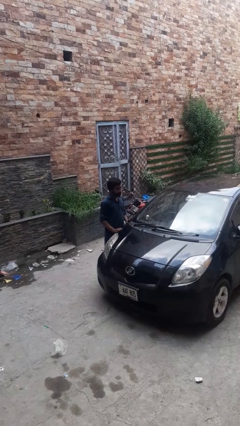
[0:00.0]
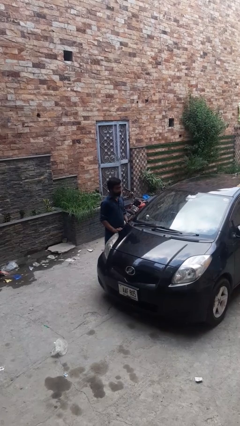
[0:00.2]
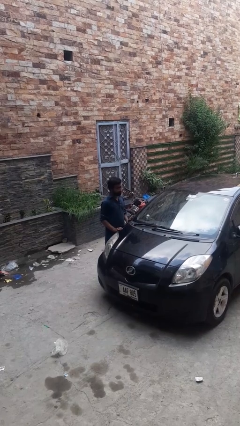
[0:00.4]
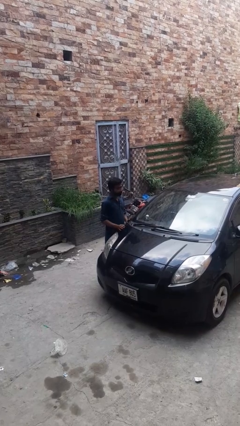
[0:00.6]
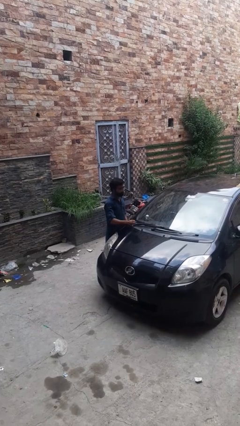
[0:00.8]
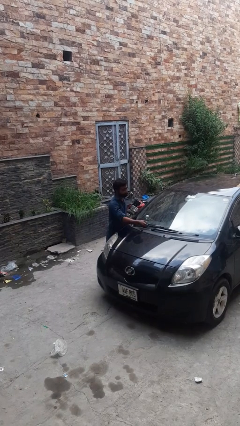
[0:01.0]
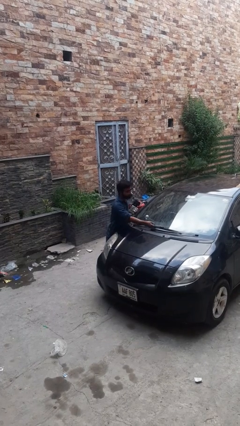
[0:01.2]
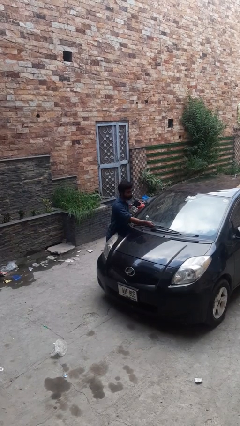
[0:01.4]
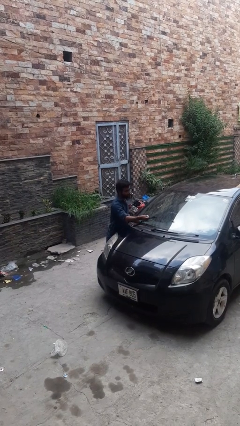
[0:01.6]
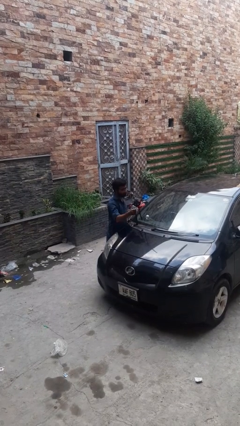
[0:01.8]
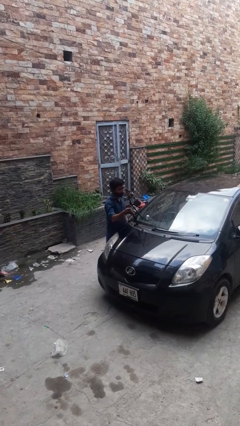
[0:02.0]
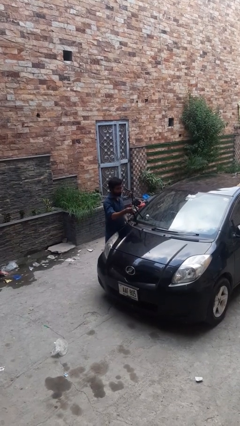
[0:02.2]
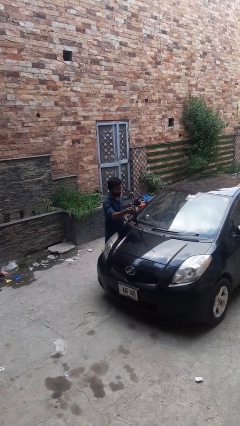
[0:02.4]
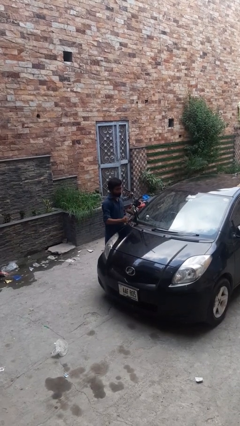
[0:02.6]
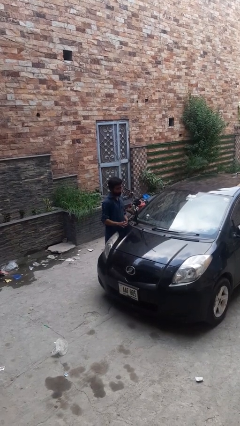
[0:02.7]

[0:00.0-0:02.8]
person flips up car wipers

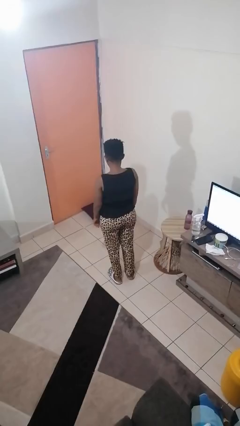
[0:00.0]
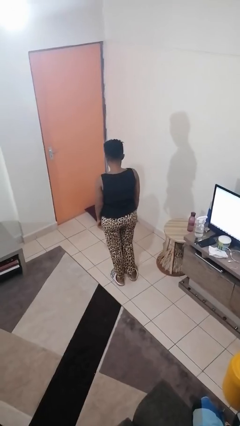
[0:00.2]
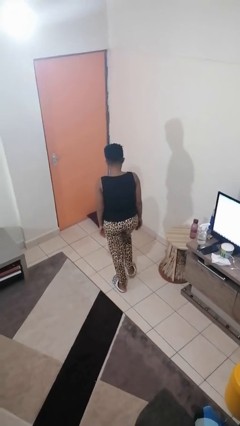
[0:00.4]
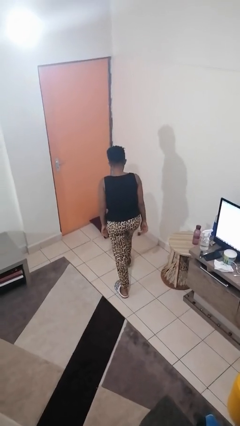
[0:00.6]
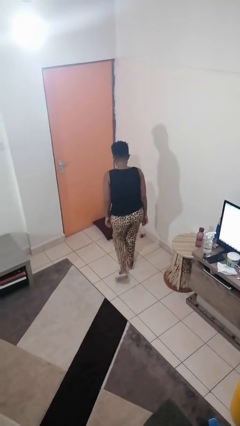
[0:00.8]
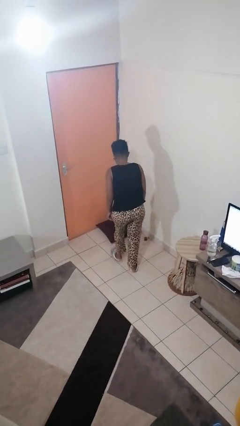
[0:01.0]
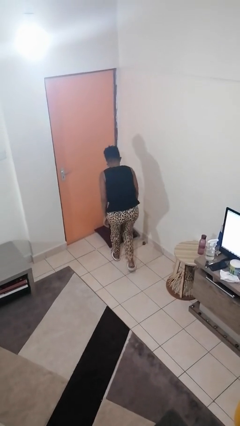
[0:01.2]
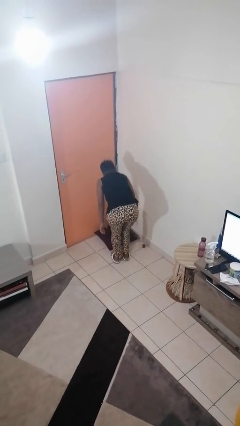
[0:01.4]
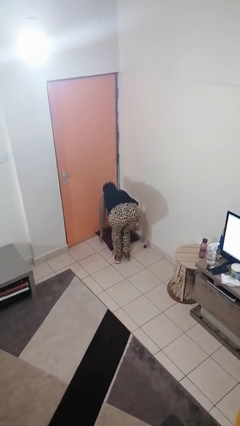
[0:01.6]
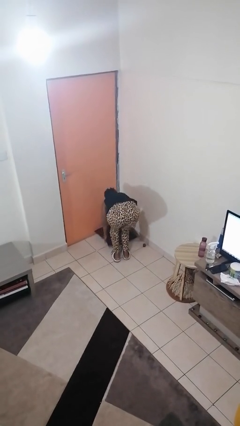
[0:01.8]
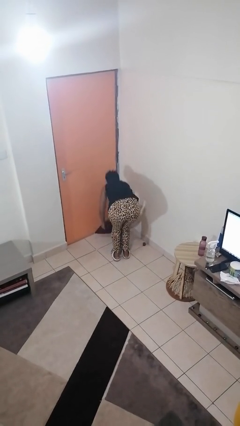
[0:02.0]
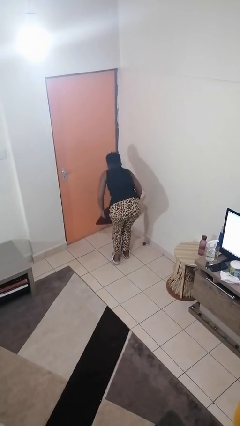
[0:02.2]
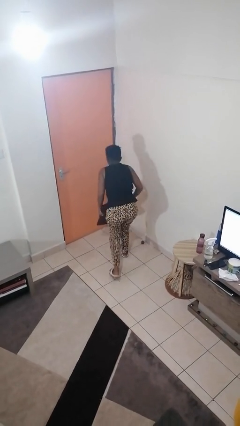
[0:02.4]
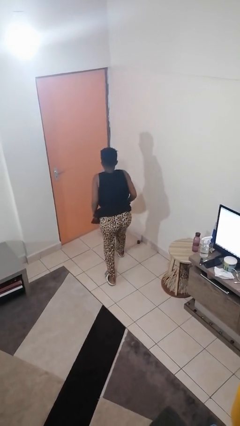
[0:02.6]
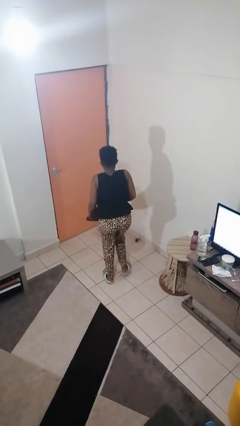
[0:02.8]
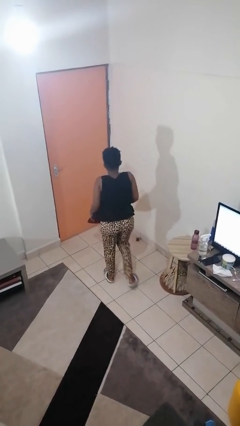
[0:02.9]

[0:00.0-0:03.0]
person picks up object from floor

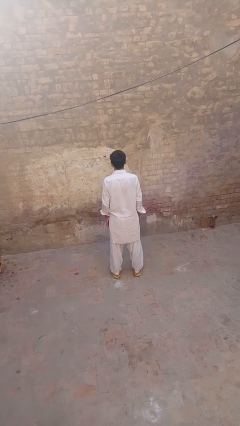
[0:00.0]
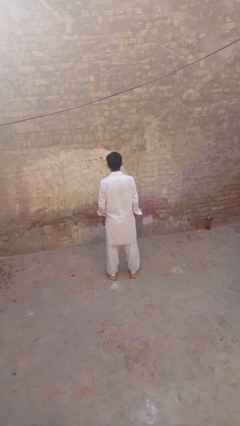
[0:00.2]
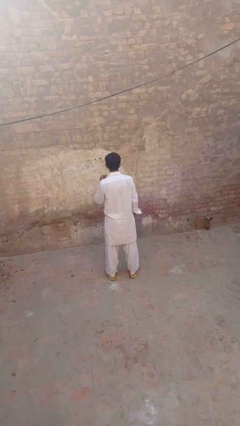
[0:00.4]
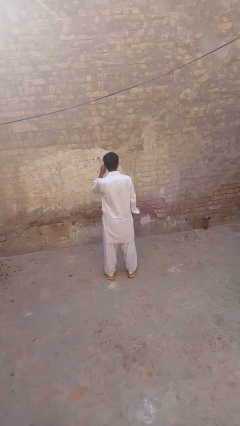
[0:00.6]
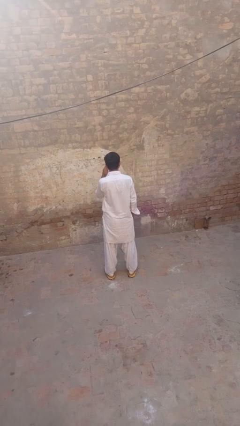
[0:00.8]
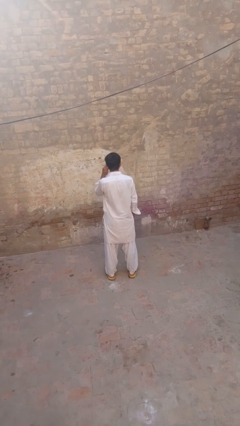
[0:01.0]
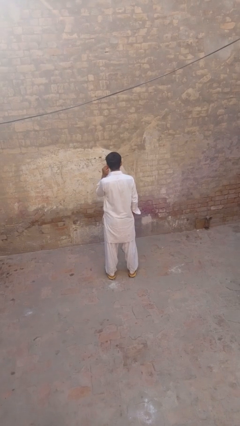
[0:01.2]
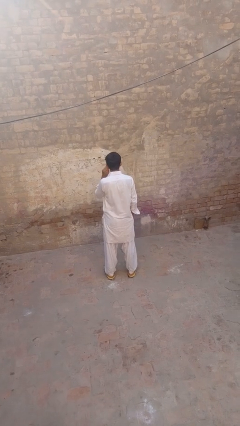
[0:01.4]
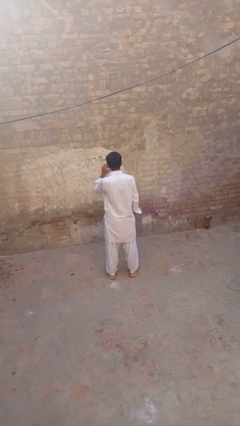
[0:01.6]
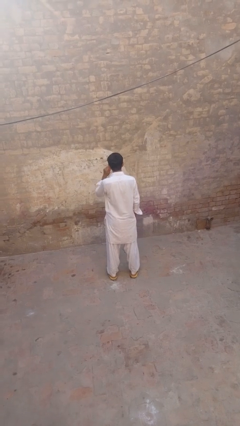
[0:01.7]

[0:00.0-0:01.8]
person touches earlobe

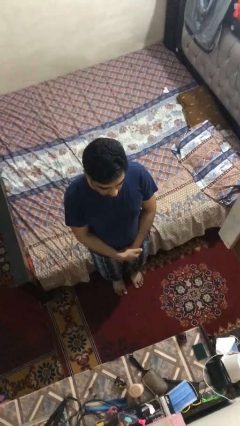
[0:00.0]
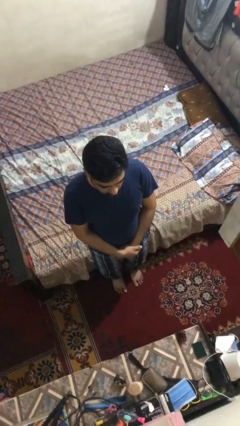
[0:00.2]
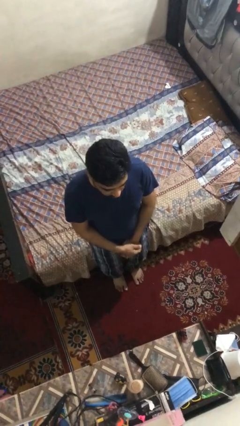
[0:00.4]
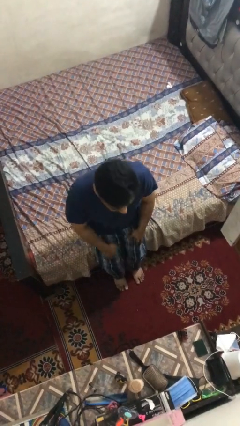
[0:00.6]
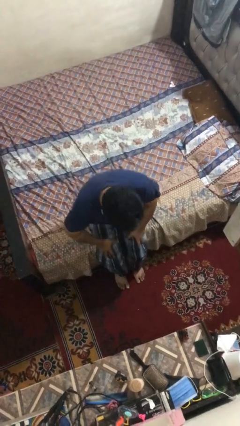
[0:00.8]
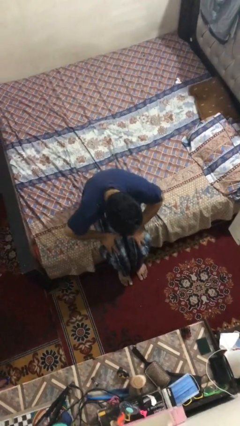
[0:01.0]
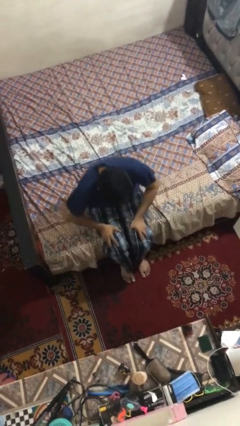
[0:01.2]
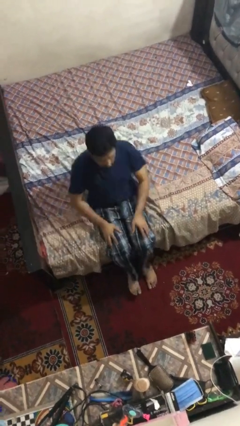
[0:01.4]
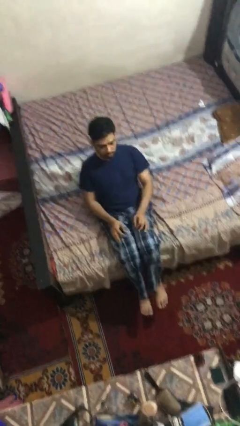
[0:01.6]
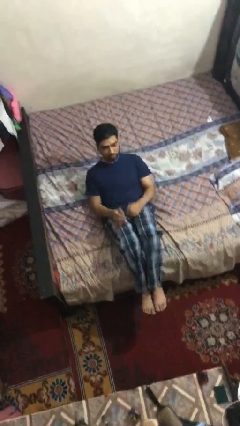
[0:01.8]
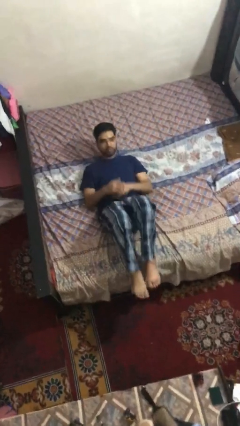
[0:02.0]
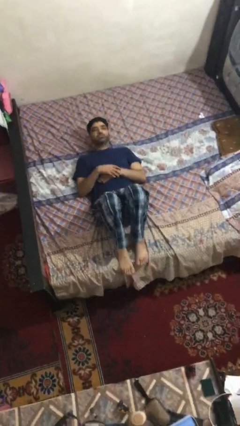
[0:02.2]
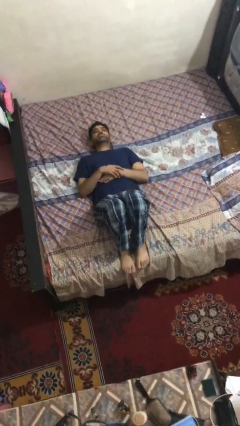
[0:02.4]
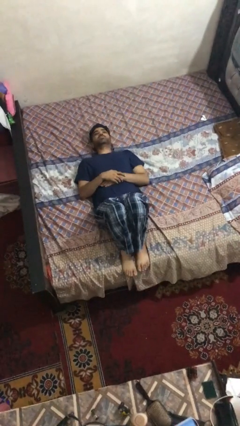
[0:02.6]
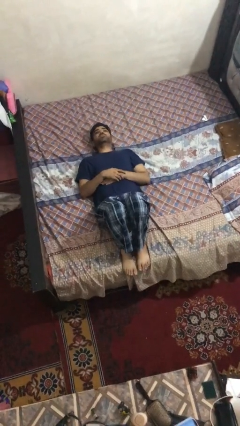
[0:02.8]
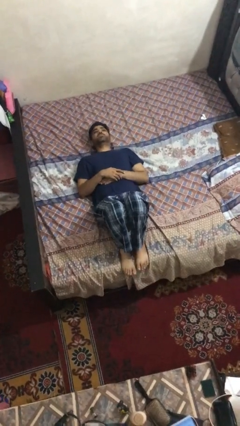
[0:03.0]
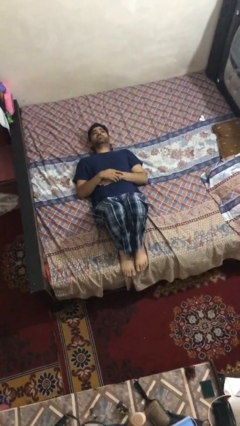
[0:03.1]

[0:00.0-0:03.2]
person lies down on bed

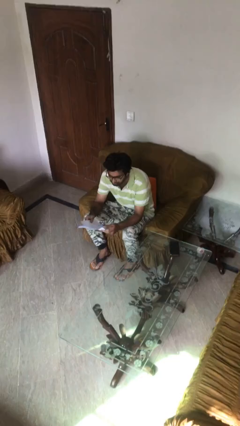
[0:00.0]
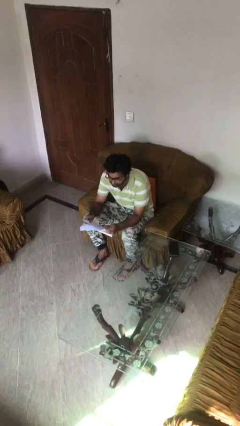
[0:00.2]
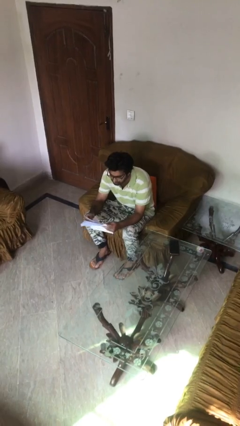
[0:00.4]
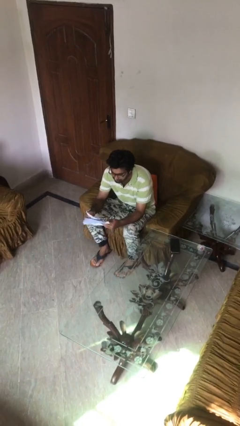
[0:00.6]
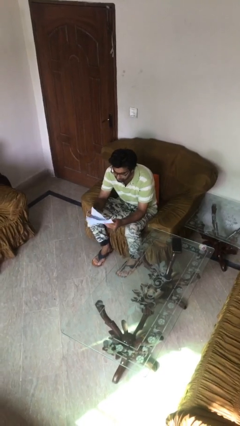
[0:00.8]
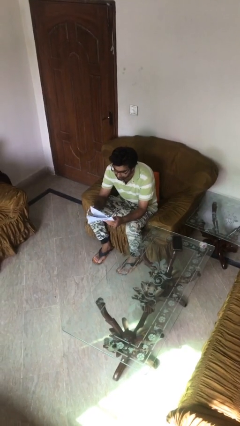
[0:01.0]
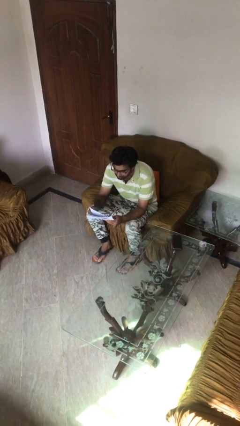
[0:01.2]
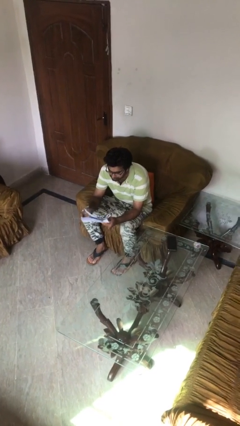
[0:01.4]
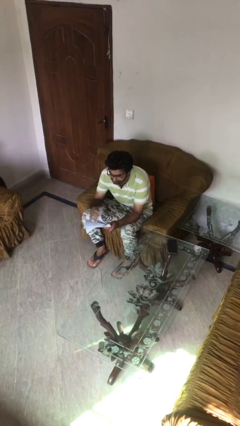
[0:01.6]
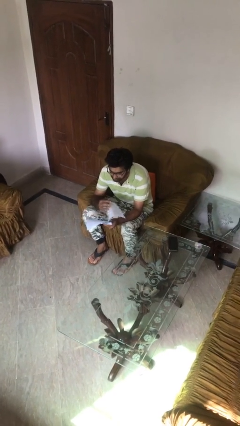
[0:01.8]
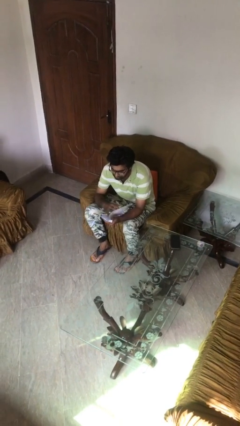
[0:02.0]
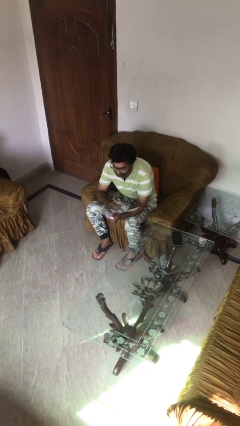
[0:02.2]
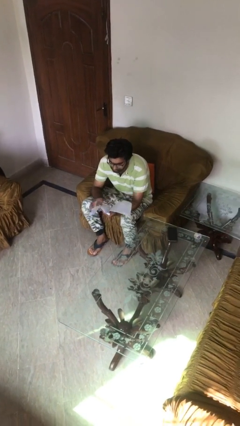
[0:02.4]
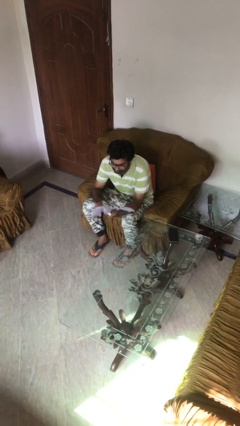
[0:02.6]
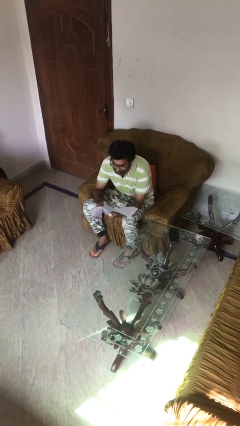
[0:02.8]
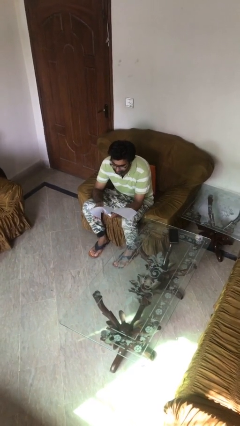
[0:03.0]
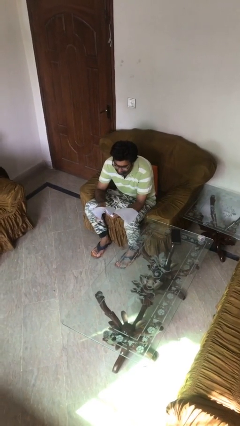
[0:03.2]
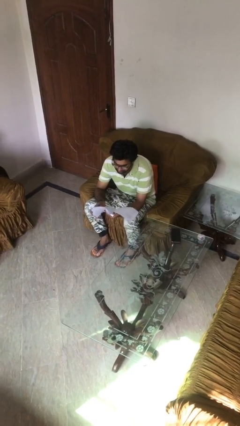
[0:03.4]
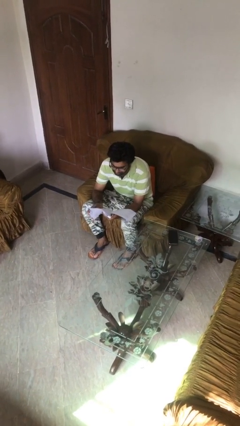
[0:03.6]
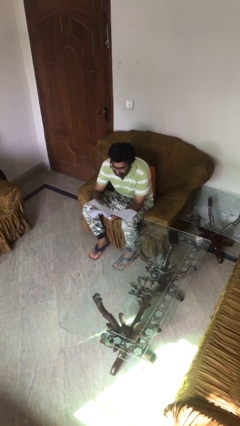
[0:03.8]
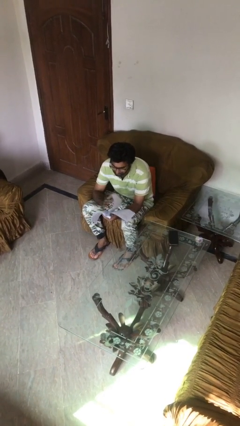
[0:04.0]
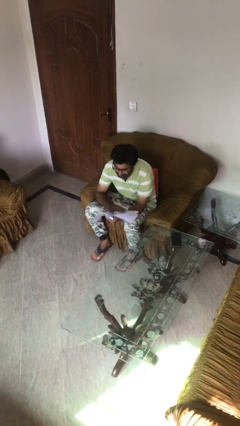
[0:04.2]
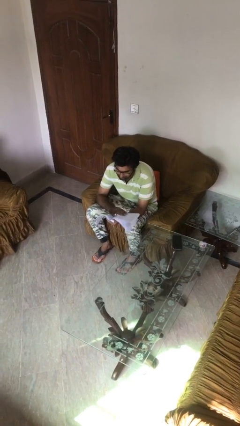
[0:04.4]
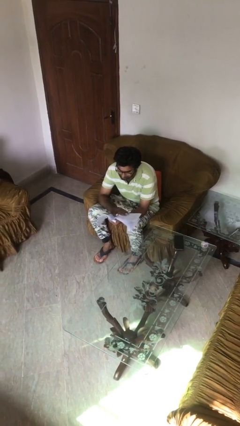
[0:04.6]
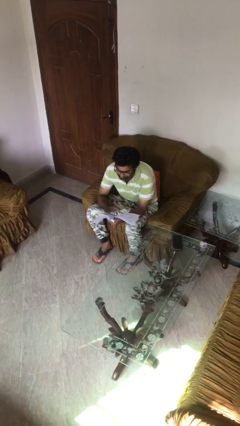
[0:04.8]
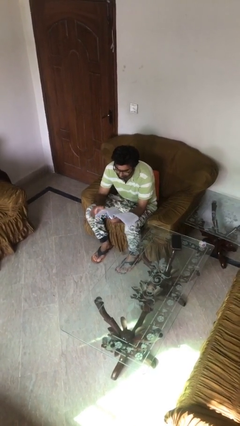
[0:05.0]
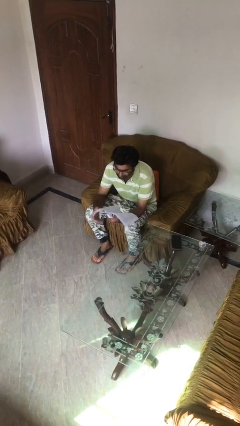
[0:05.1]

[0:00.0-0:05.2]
person reads document

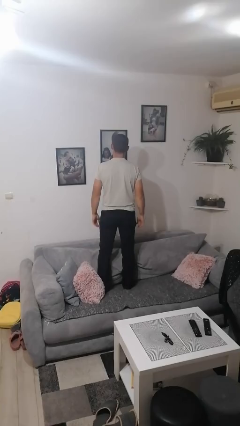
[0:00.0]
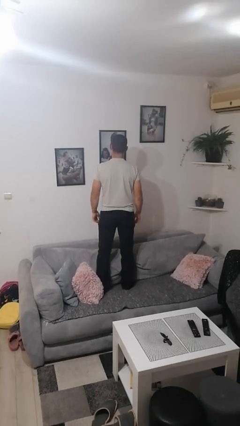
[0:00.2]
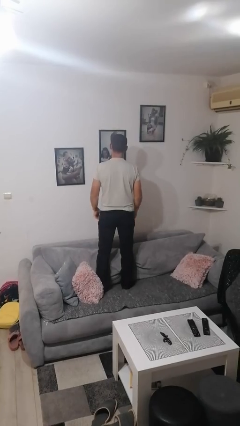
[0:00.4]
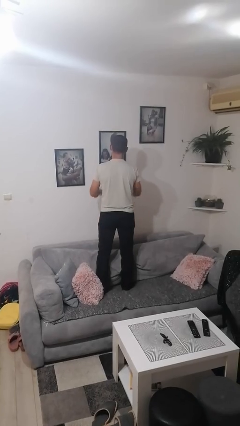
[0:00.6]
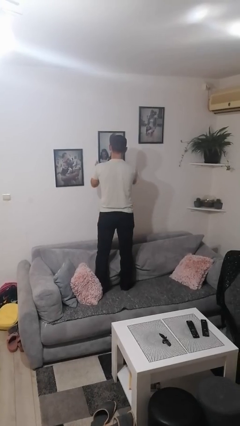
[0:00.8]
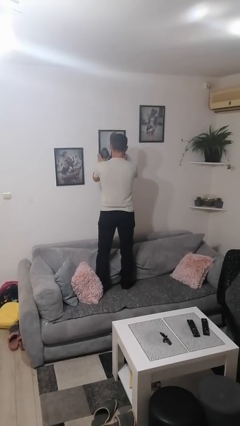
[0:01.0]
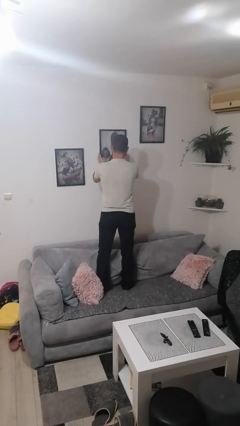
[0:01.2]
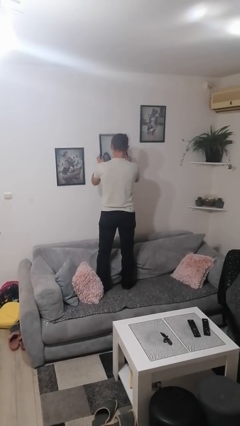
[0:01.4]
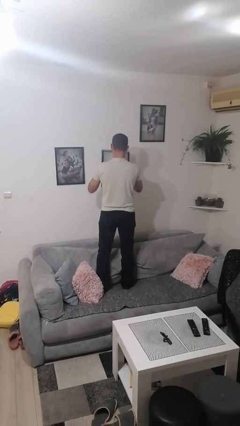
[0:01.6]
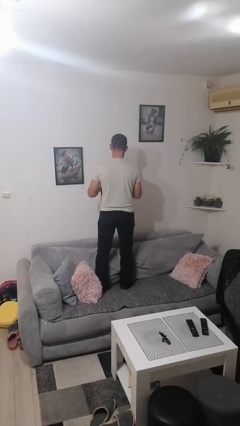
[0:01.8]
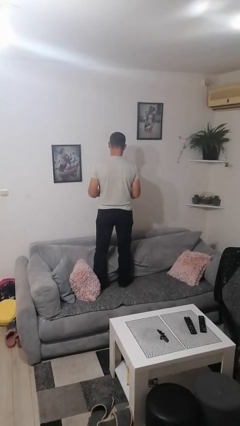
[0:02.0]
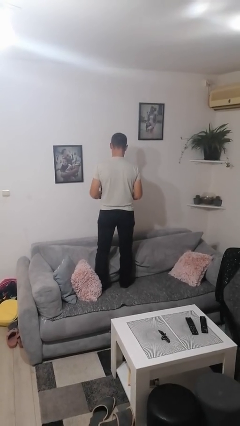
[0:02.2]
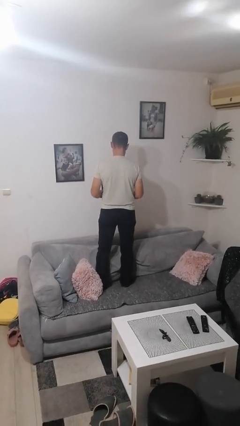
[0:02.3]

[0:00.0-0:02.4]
person takes down picture frame
